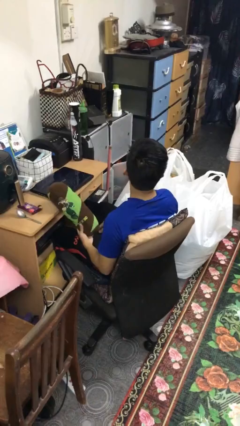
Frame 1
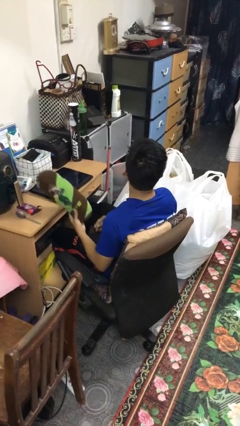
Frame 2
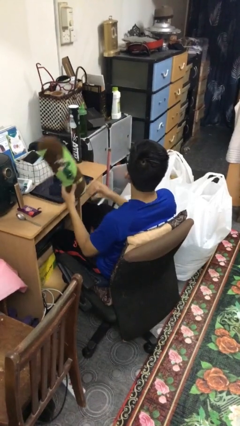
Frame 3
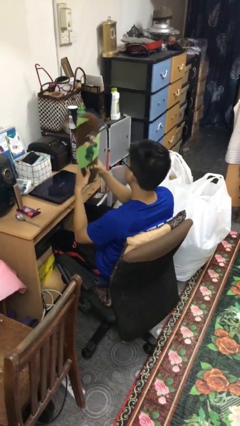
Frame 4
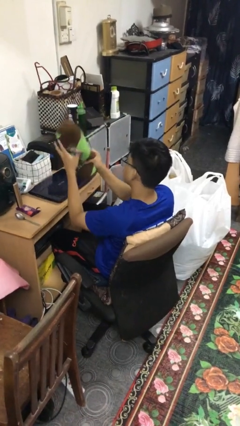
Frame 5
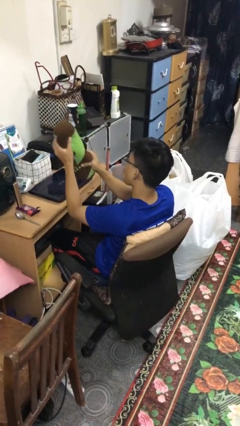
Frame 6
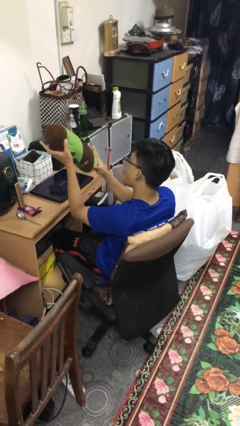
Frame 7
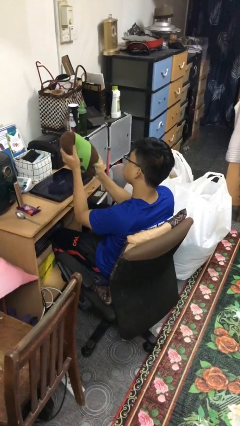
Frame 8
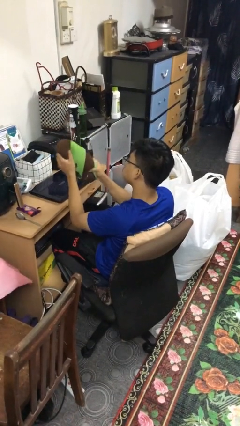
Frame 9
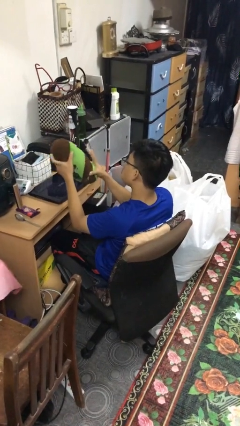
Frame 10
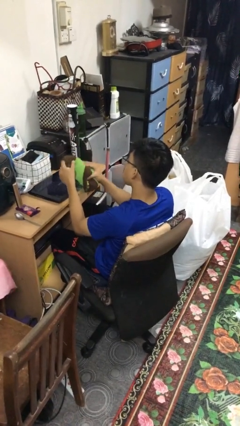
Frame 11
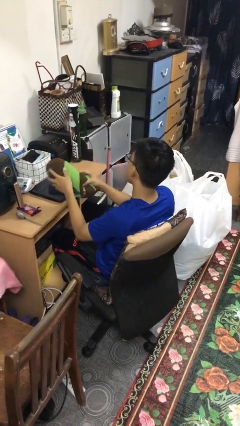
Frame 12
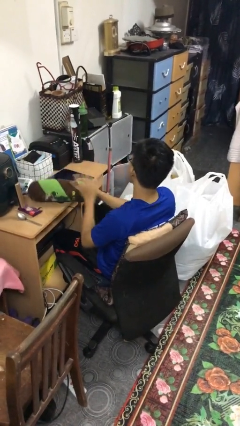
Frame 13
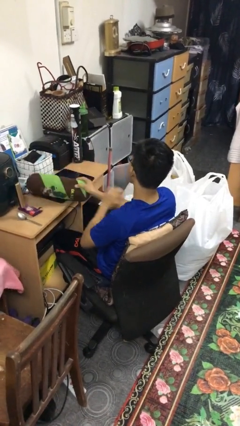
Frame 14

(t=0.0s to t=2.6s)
person squeezes object

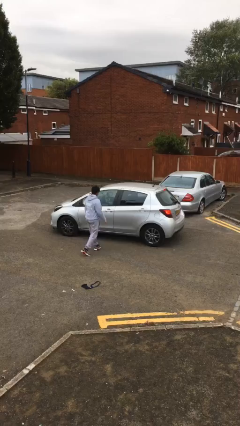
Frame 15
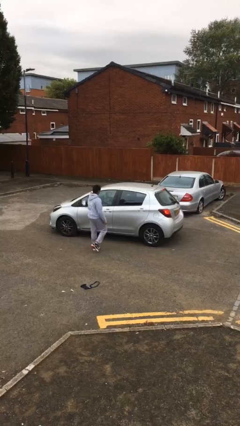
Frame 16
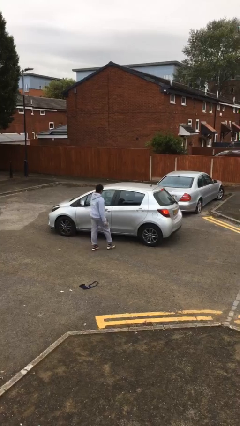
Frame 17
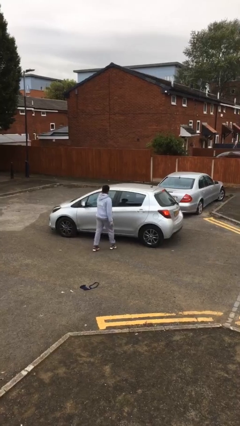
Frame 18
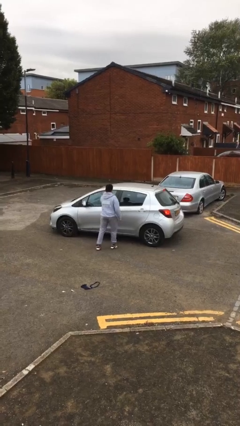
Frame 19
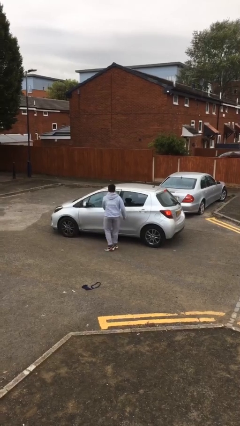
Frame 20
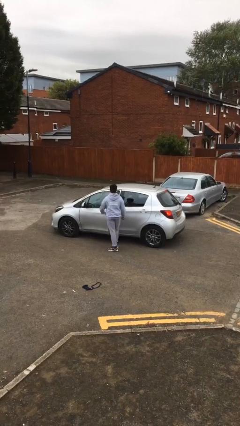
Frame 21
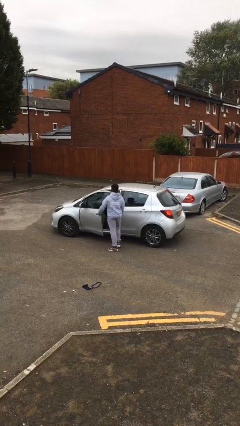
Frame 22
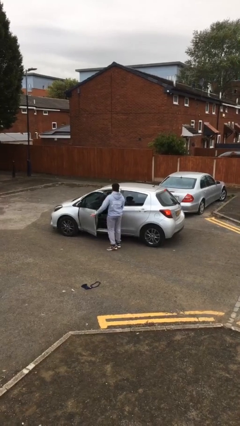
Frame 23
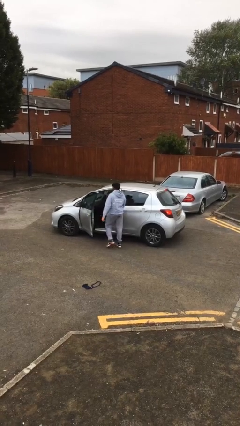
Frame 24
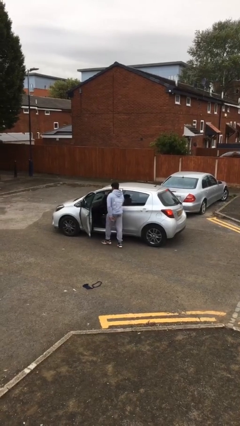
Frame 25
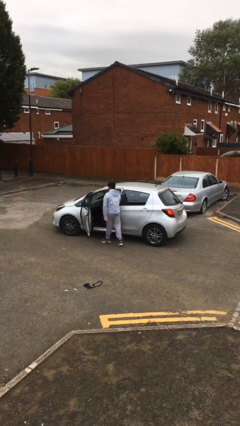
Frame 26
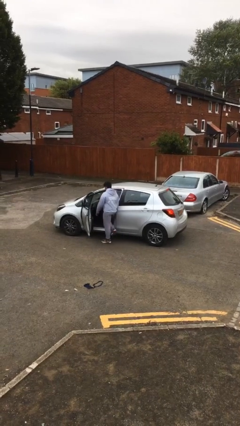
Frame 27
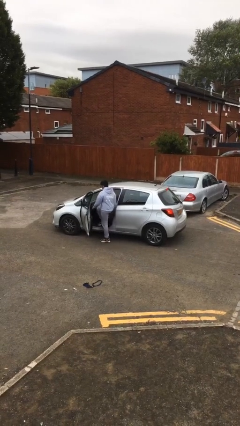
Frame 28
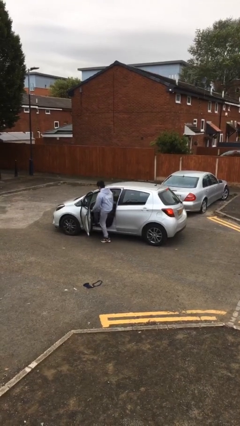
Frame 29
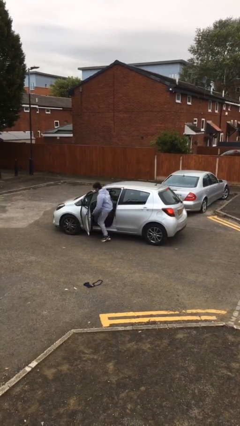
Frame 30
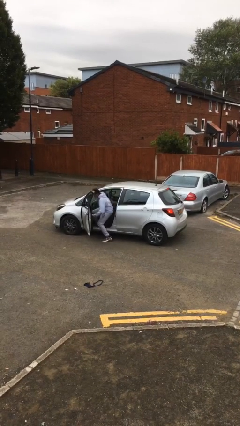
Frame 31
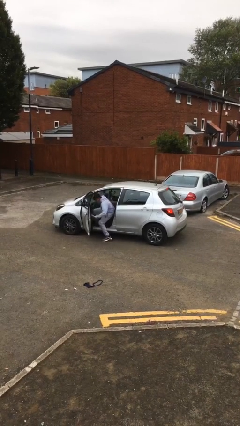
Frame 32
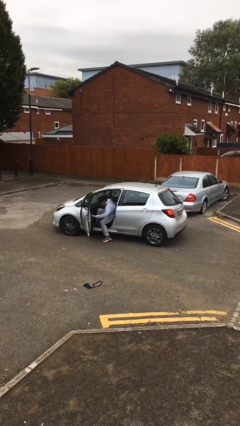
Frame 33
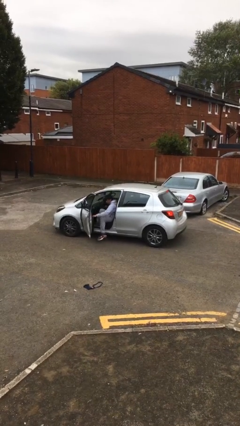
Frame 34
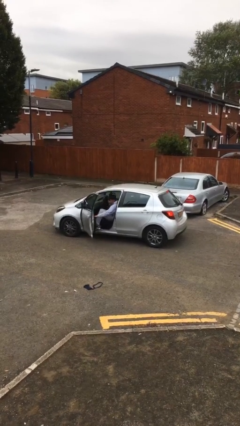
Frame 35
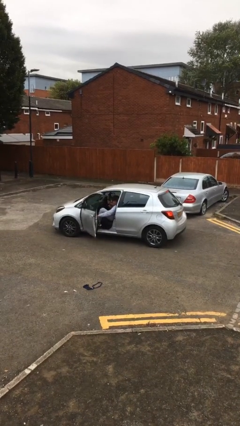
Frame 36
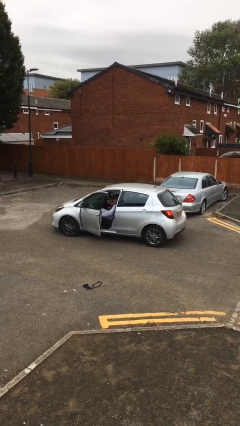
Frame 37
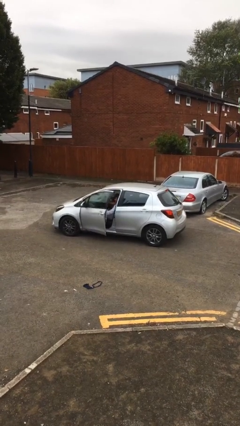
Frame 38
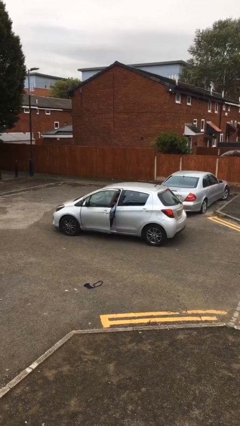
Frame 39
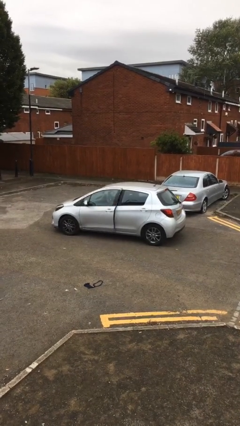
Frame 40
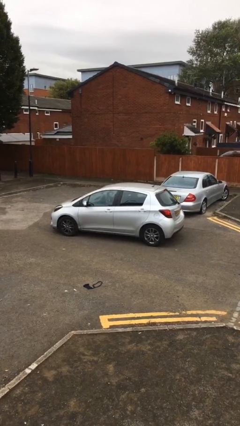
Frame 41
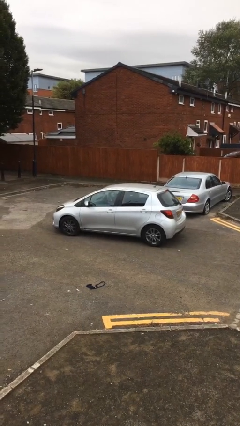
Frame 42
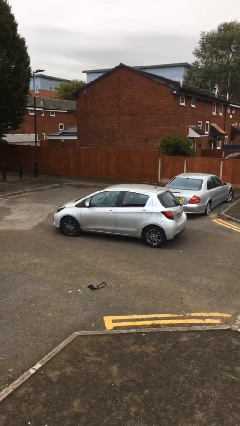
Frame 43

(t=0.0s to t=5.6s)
car picks up person

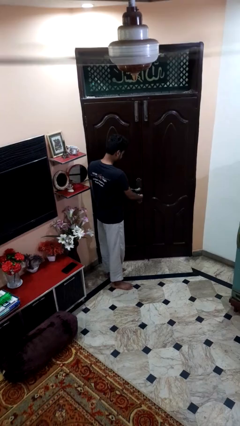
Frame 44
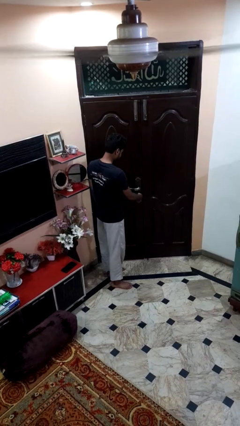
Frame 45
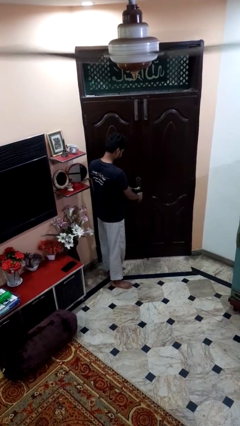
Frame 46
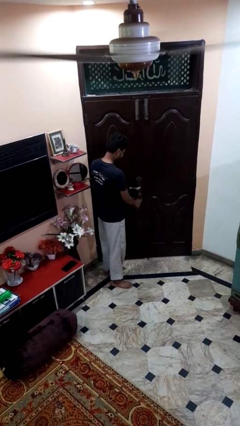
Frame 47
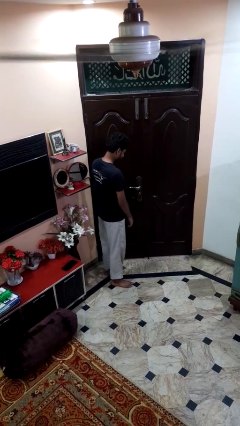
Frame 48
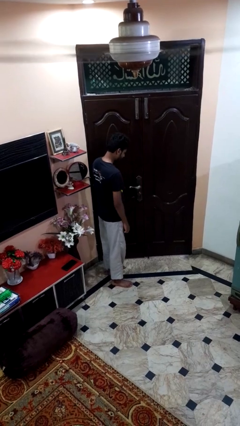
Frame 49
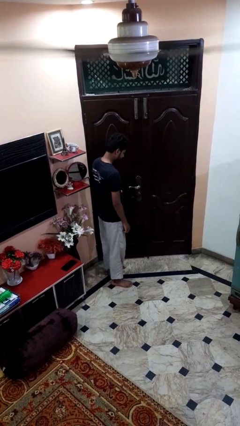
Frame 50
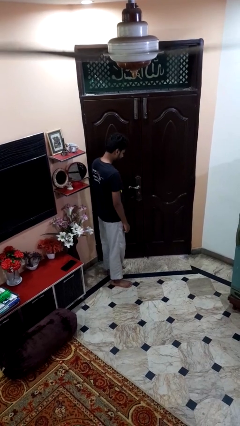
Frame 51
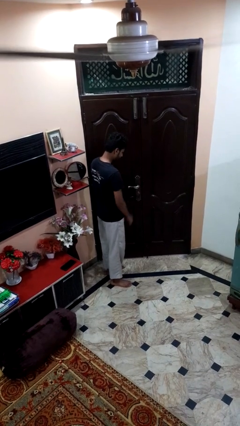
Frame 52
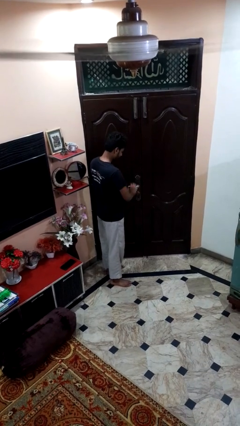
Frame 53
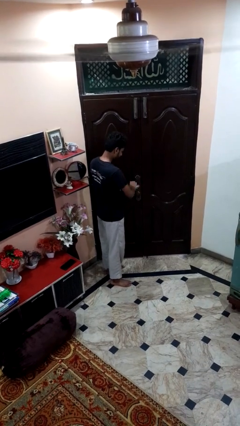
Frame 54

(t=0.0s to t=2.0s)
person unlocks door with keys

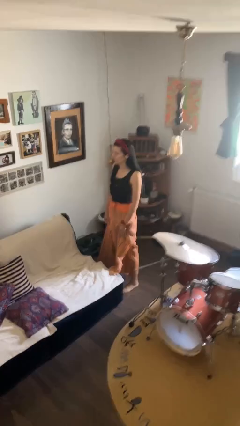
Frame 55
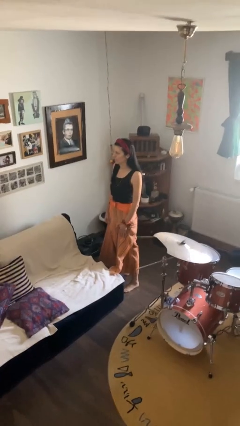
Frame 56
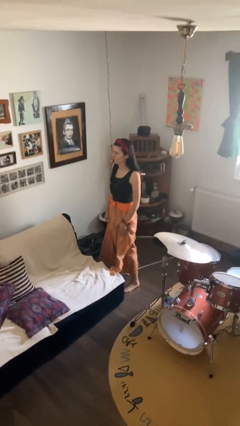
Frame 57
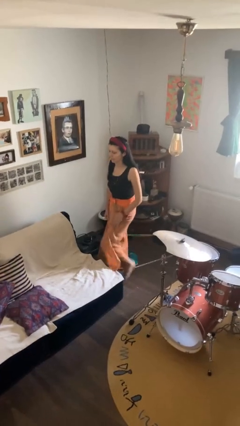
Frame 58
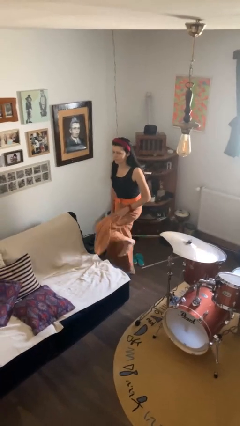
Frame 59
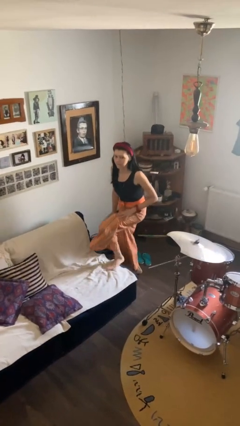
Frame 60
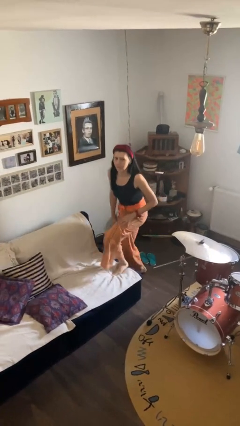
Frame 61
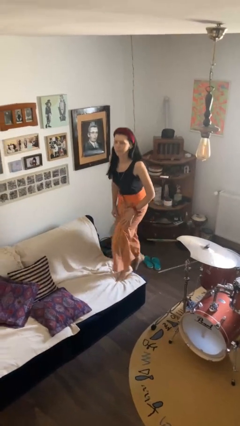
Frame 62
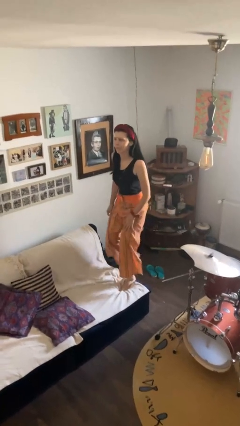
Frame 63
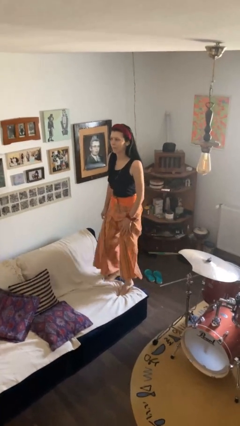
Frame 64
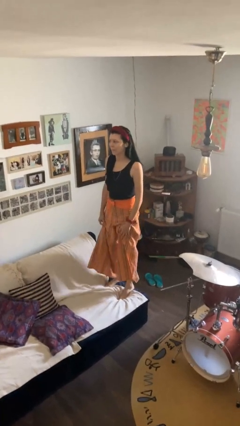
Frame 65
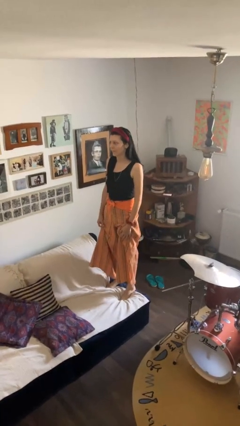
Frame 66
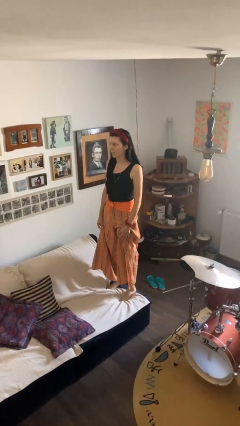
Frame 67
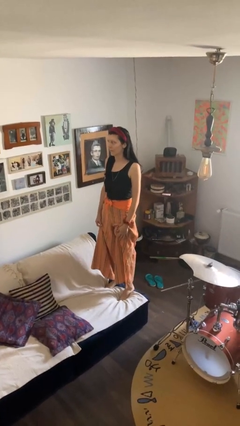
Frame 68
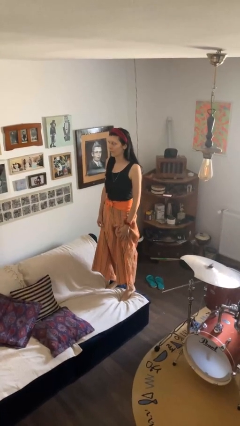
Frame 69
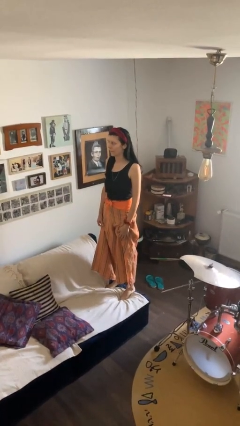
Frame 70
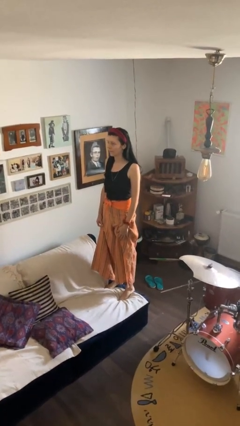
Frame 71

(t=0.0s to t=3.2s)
person climbs on couch

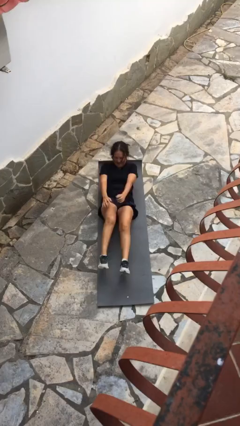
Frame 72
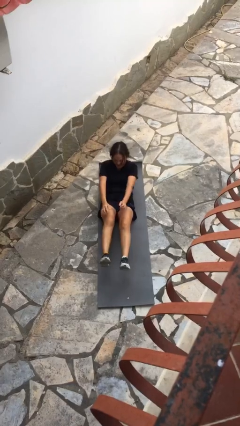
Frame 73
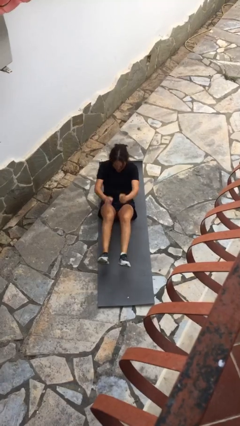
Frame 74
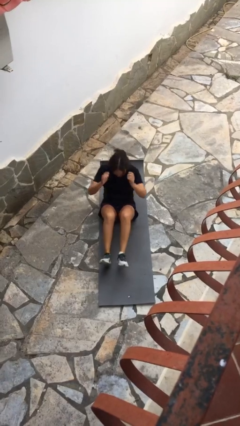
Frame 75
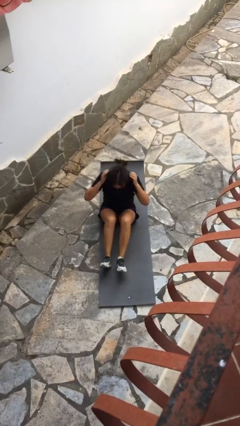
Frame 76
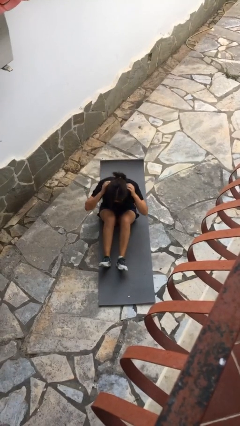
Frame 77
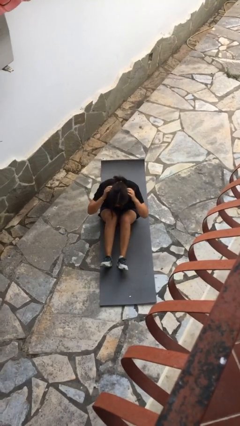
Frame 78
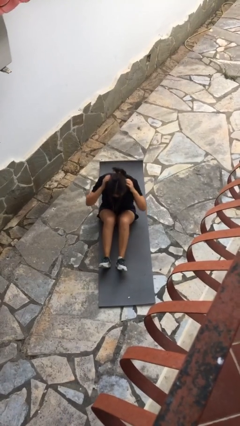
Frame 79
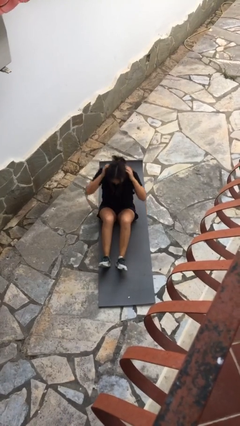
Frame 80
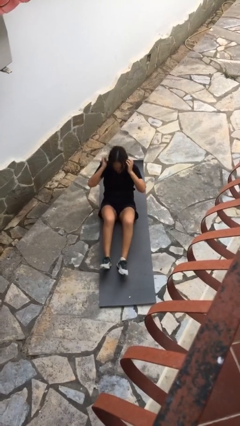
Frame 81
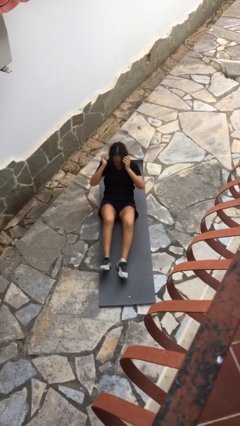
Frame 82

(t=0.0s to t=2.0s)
person exercises with situp

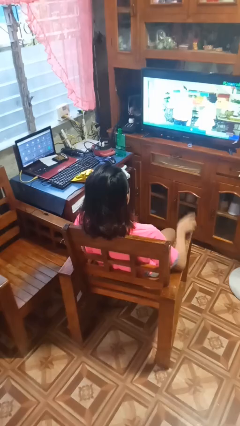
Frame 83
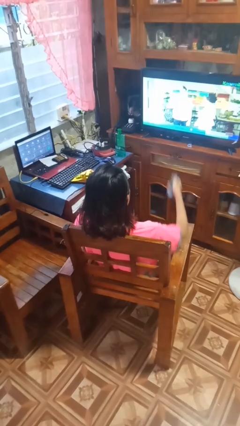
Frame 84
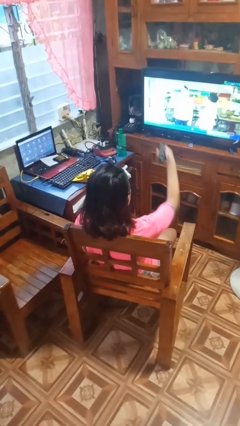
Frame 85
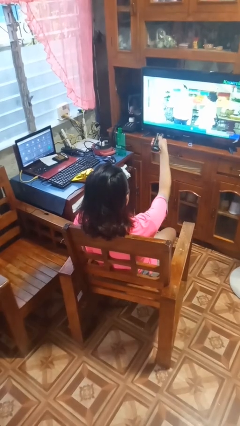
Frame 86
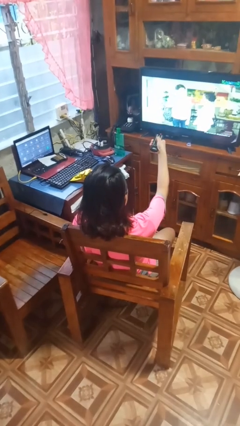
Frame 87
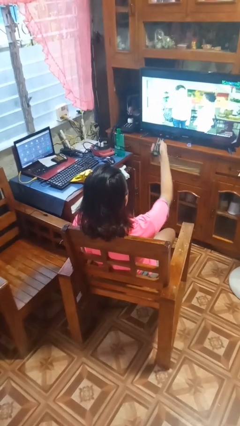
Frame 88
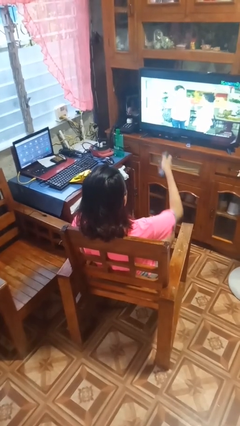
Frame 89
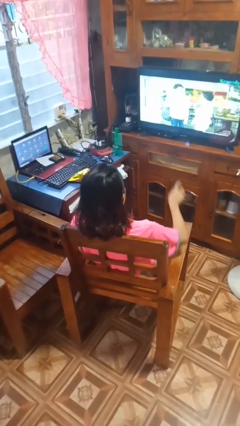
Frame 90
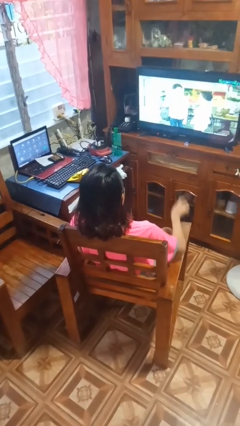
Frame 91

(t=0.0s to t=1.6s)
person uses television remote

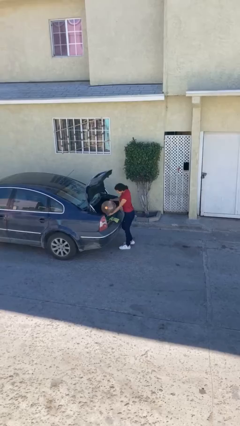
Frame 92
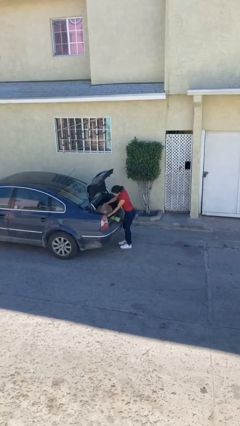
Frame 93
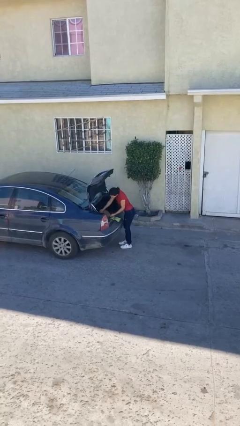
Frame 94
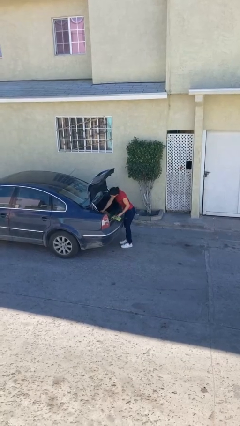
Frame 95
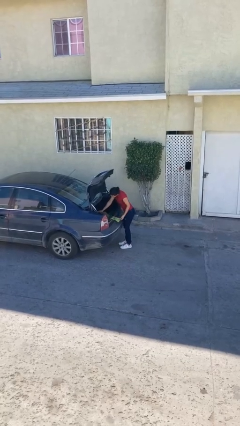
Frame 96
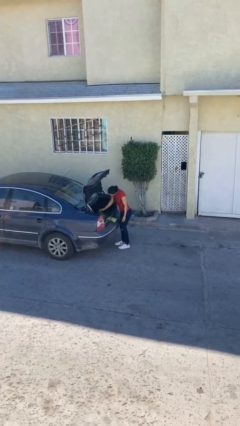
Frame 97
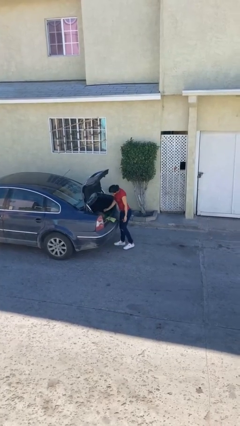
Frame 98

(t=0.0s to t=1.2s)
person loads car
